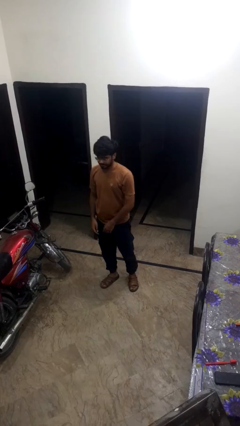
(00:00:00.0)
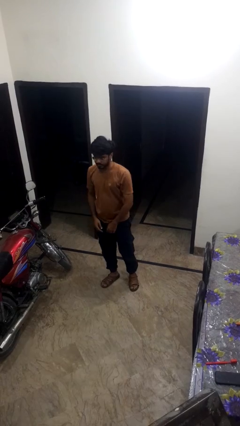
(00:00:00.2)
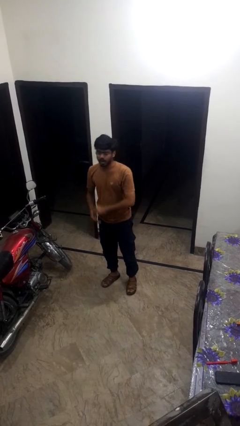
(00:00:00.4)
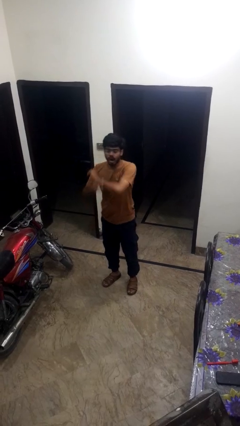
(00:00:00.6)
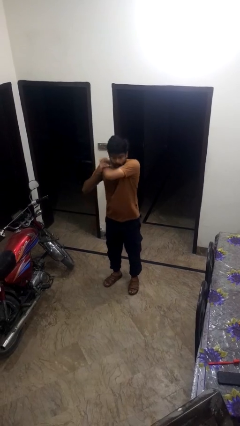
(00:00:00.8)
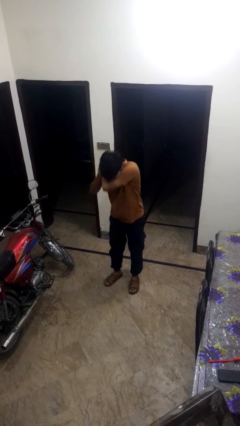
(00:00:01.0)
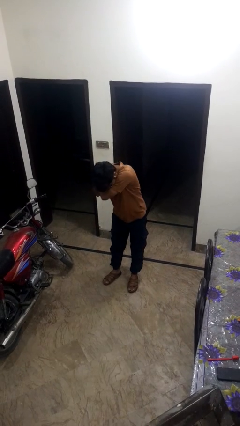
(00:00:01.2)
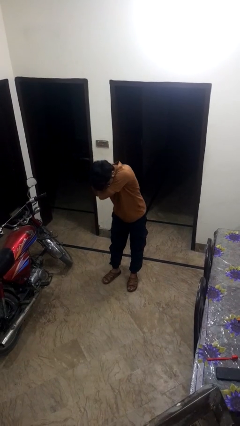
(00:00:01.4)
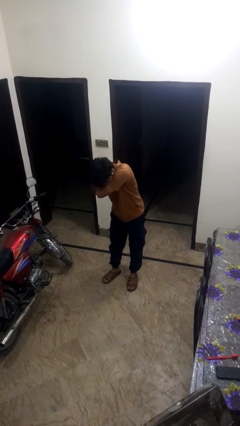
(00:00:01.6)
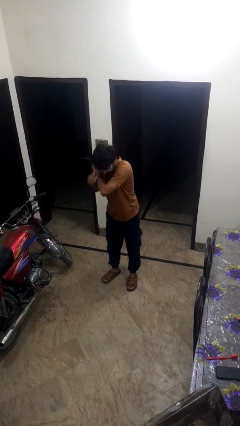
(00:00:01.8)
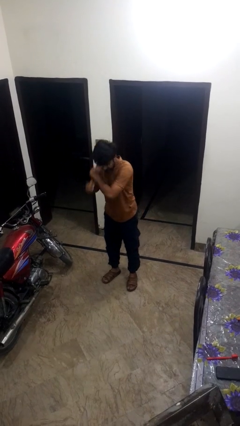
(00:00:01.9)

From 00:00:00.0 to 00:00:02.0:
person sneezes into arm

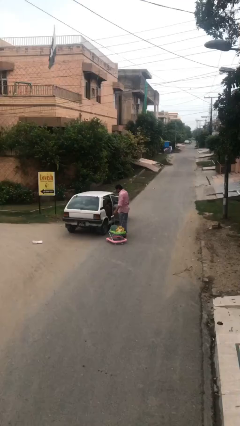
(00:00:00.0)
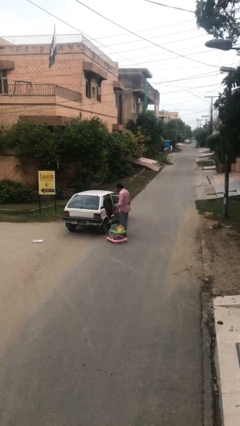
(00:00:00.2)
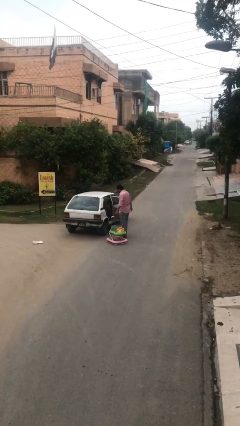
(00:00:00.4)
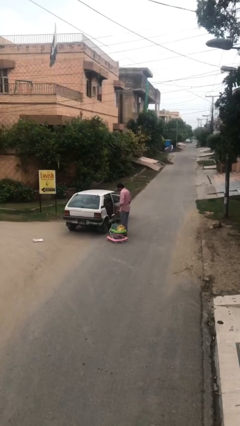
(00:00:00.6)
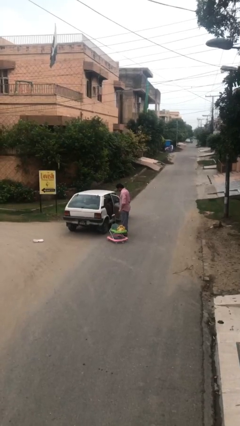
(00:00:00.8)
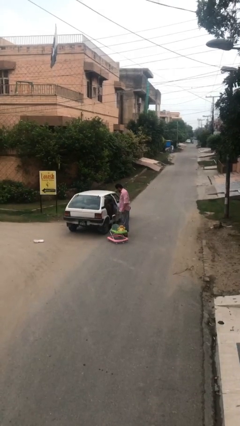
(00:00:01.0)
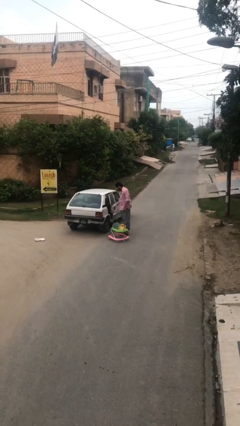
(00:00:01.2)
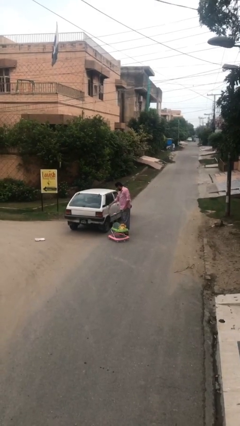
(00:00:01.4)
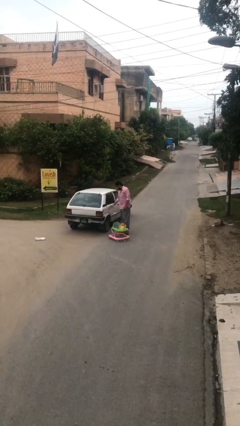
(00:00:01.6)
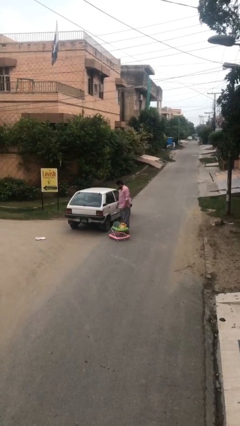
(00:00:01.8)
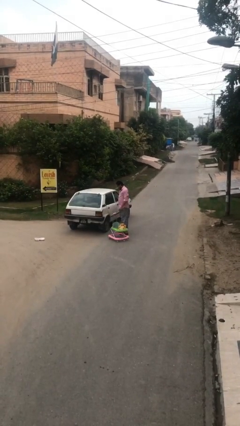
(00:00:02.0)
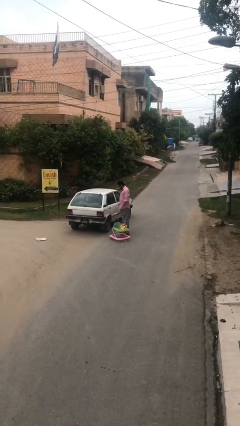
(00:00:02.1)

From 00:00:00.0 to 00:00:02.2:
person closes car door

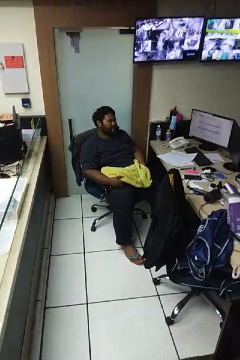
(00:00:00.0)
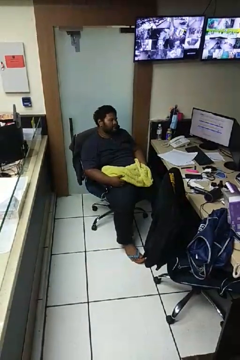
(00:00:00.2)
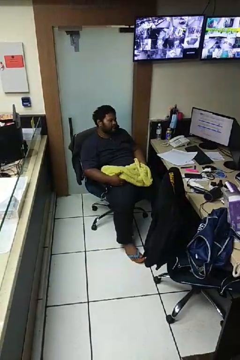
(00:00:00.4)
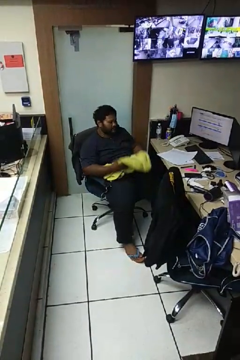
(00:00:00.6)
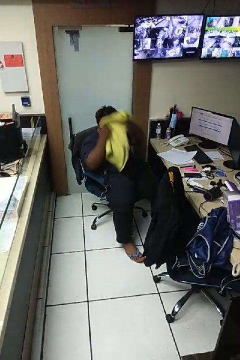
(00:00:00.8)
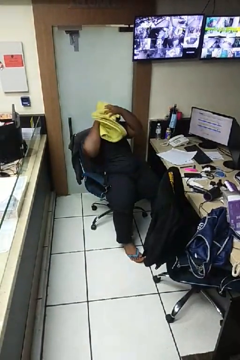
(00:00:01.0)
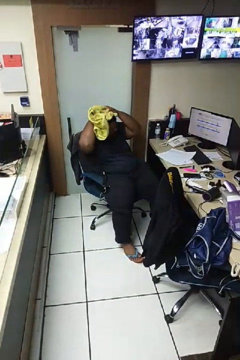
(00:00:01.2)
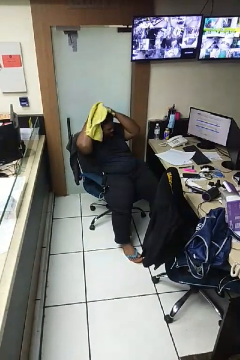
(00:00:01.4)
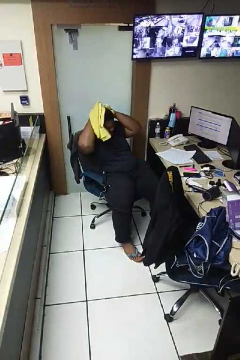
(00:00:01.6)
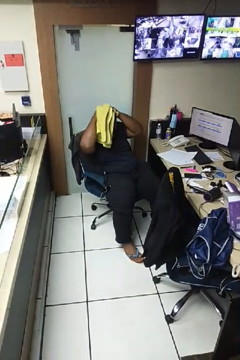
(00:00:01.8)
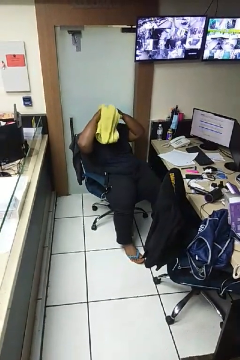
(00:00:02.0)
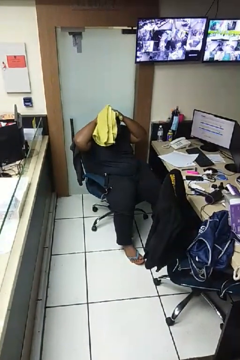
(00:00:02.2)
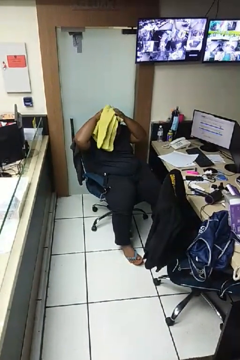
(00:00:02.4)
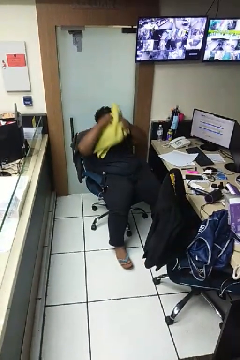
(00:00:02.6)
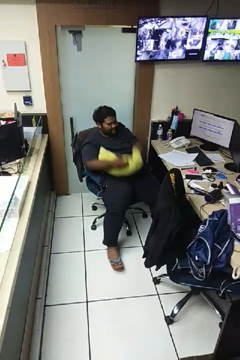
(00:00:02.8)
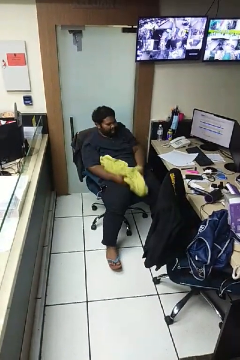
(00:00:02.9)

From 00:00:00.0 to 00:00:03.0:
person dries hair with towel

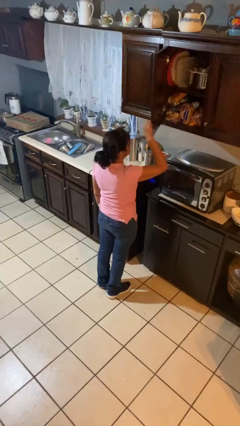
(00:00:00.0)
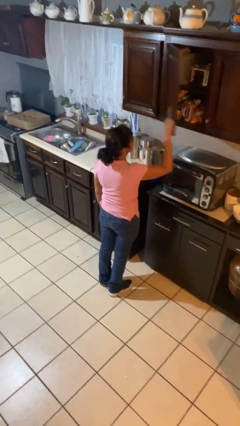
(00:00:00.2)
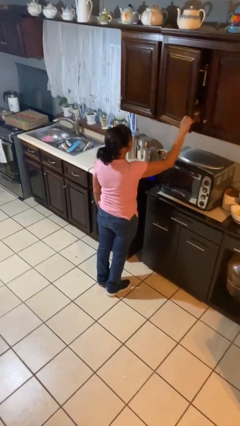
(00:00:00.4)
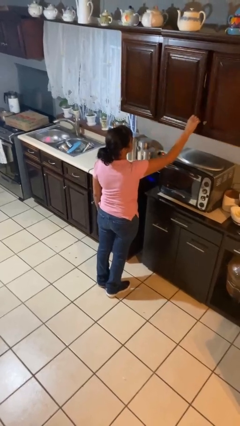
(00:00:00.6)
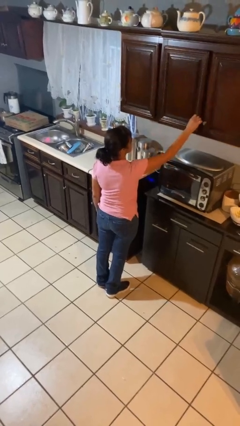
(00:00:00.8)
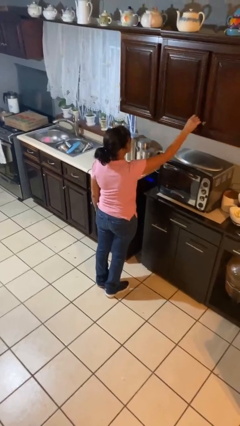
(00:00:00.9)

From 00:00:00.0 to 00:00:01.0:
person closes cabinet

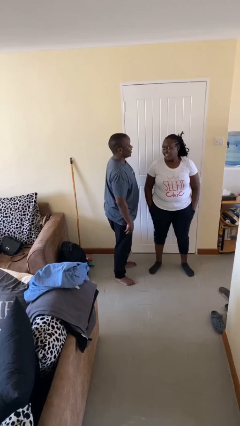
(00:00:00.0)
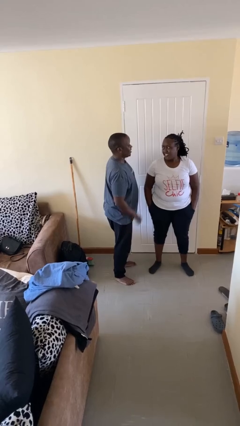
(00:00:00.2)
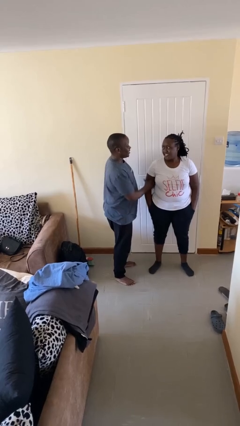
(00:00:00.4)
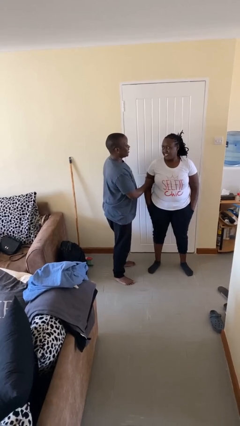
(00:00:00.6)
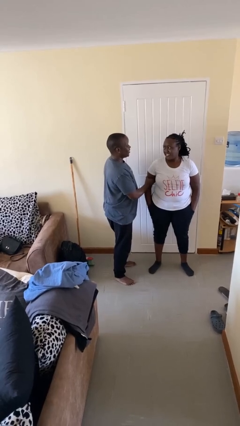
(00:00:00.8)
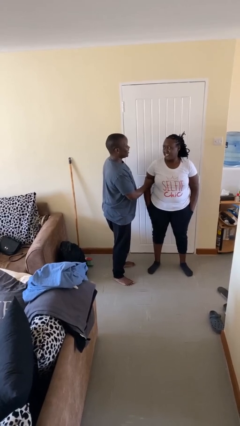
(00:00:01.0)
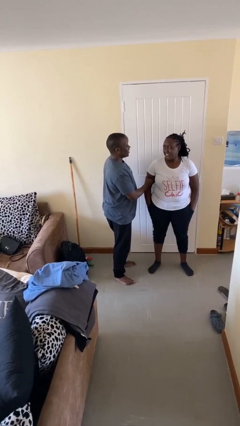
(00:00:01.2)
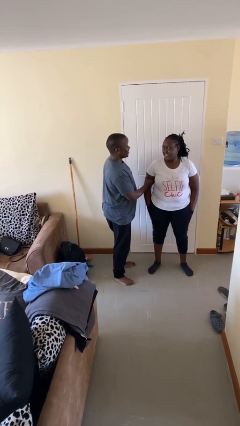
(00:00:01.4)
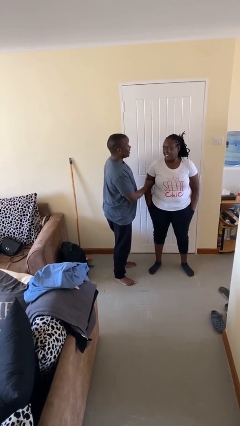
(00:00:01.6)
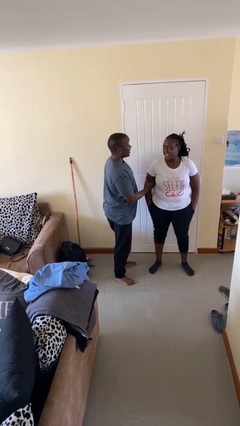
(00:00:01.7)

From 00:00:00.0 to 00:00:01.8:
person grabs person by bicep

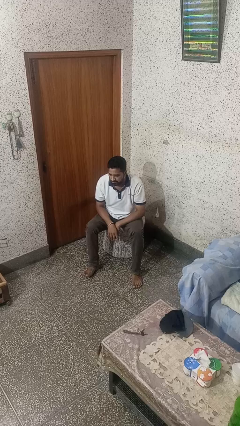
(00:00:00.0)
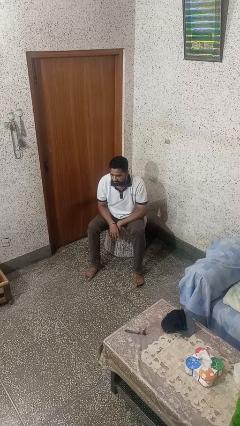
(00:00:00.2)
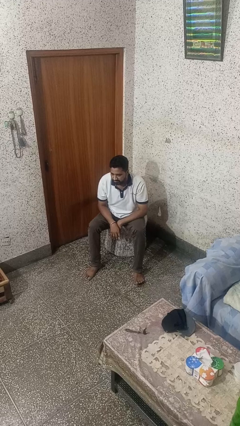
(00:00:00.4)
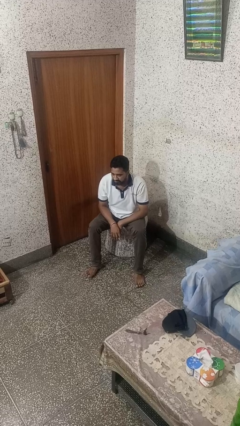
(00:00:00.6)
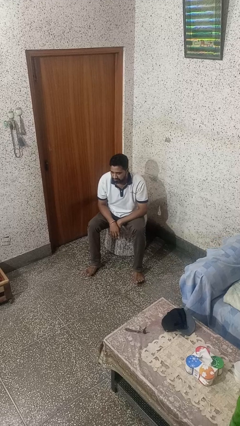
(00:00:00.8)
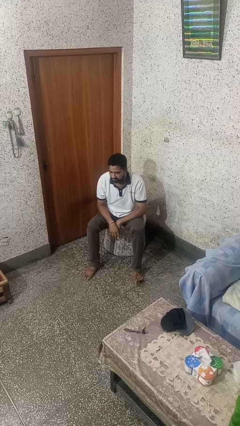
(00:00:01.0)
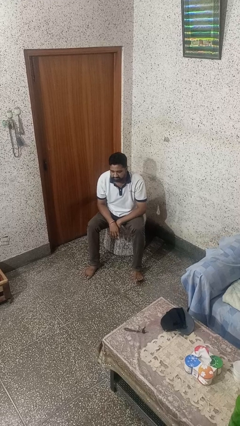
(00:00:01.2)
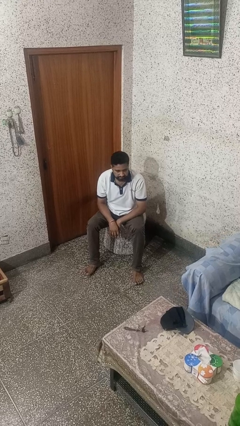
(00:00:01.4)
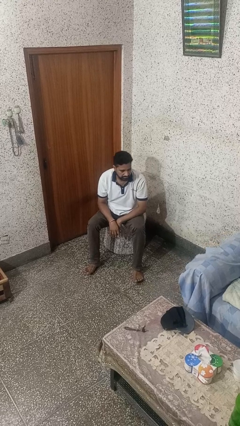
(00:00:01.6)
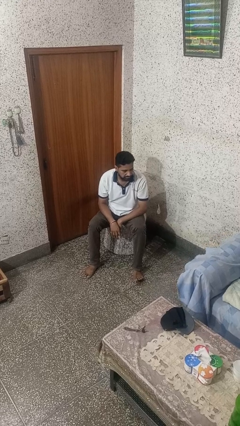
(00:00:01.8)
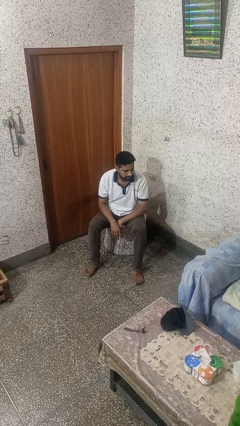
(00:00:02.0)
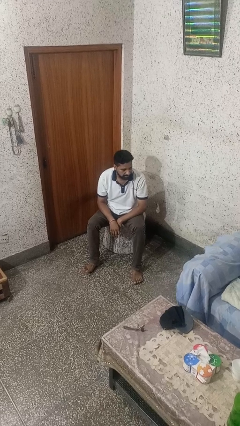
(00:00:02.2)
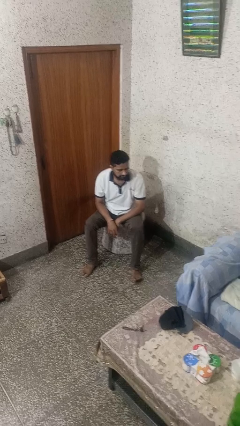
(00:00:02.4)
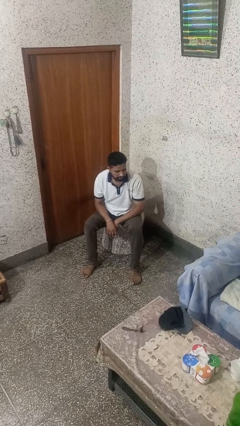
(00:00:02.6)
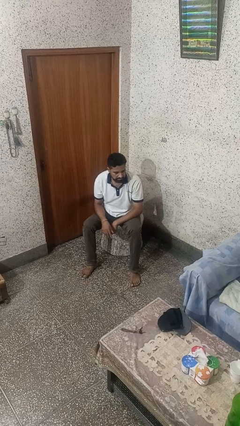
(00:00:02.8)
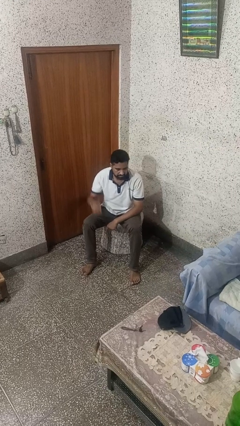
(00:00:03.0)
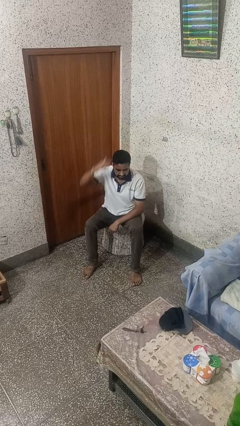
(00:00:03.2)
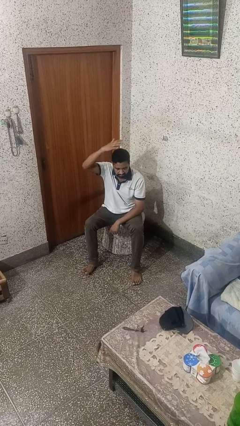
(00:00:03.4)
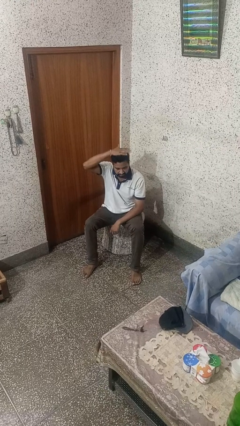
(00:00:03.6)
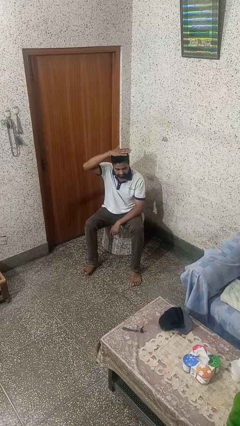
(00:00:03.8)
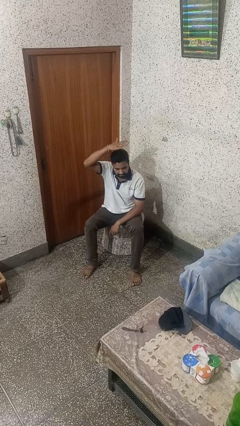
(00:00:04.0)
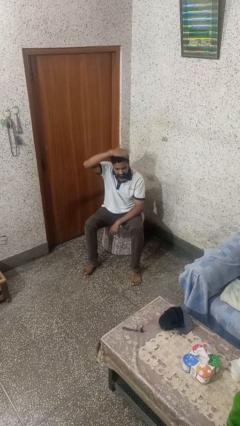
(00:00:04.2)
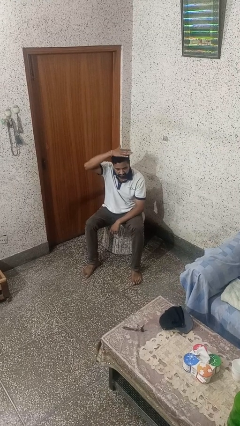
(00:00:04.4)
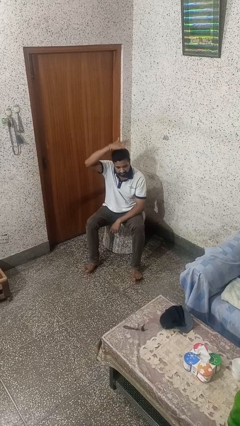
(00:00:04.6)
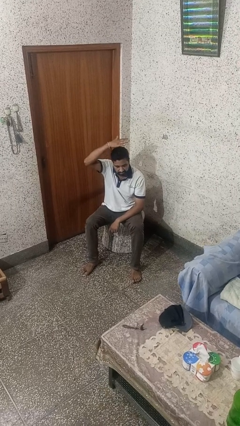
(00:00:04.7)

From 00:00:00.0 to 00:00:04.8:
person gestures cut

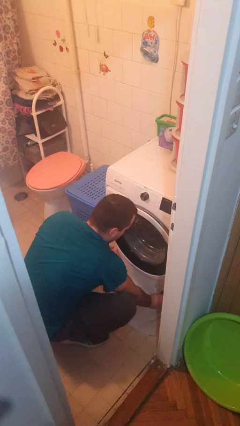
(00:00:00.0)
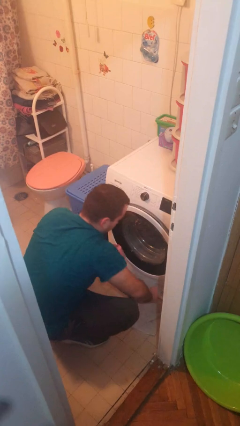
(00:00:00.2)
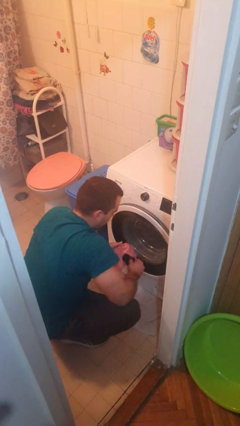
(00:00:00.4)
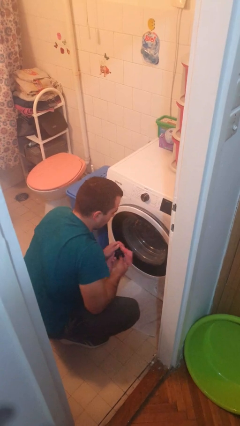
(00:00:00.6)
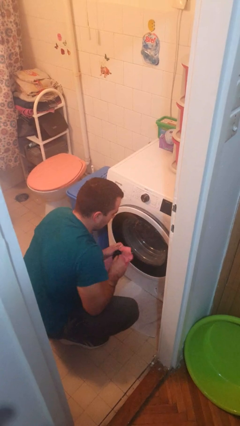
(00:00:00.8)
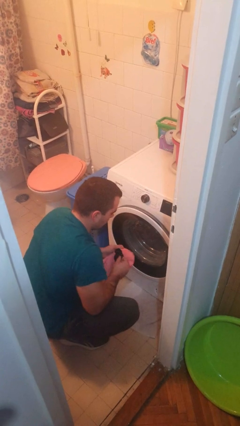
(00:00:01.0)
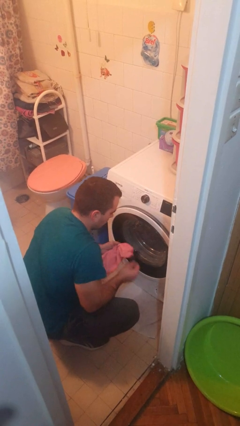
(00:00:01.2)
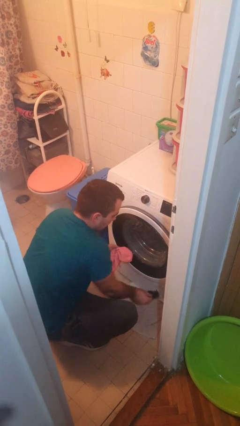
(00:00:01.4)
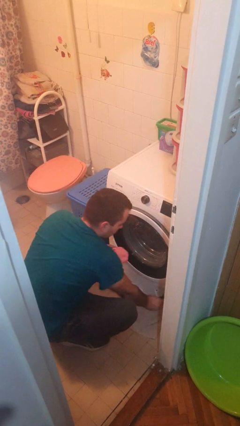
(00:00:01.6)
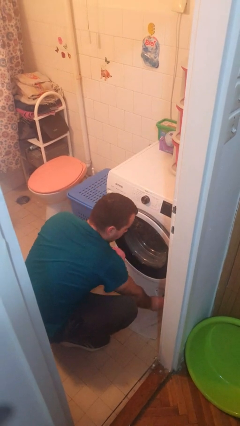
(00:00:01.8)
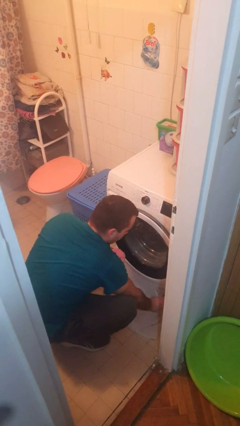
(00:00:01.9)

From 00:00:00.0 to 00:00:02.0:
person cleans dryer lint trap

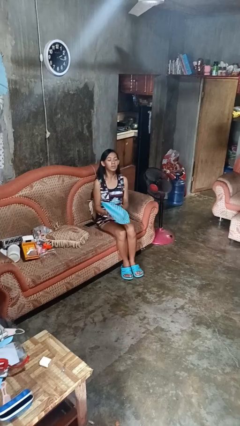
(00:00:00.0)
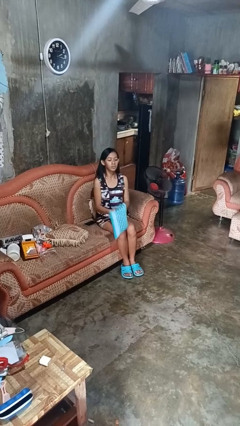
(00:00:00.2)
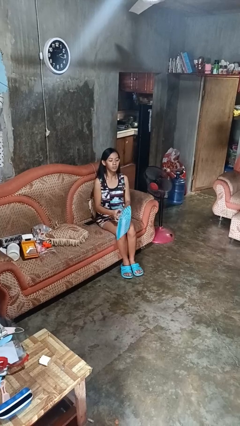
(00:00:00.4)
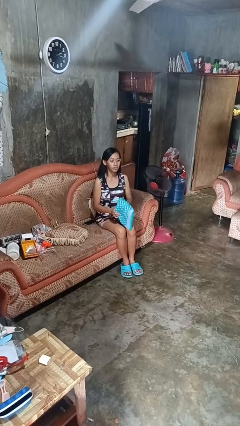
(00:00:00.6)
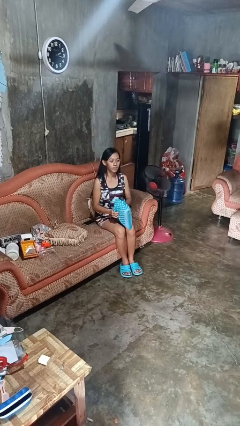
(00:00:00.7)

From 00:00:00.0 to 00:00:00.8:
person catches dropped object
